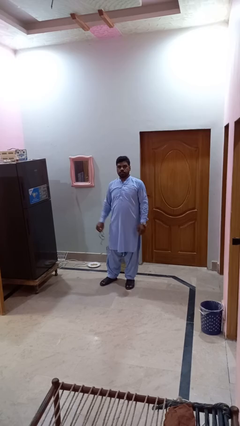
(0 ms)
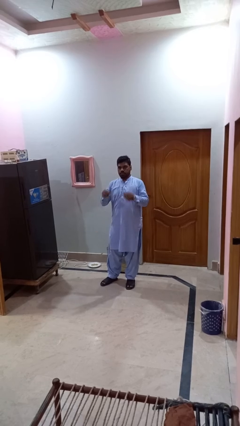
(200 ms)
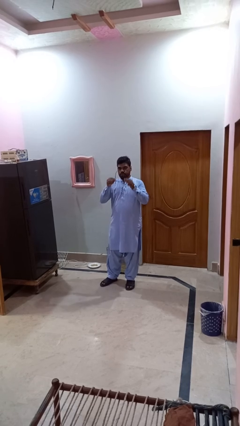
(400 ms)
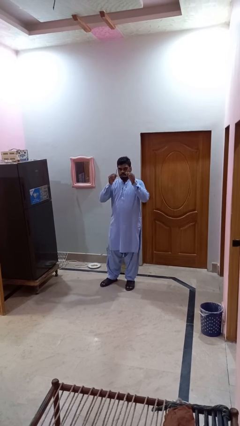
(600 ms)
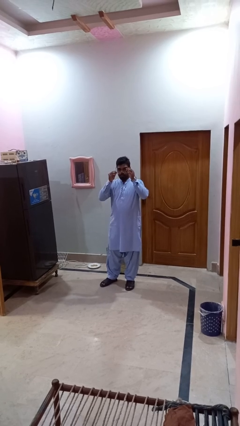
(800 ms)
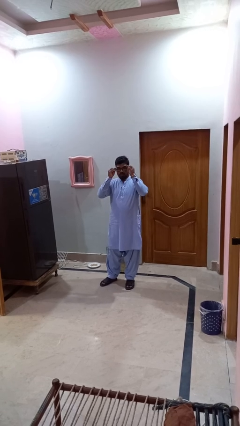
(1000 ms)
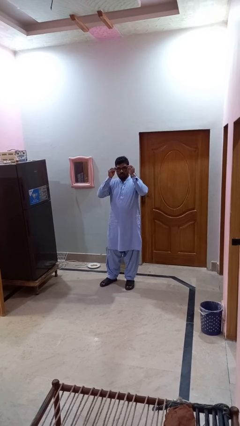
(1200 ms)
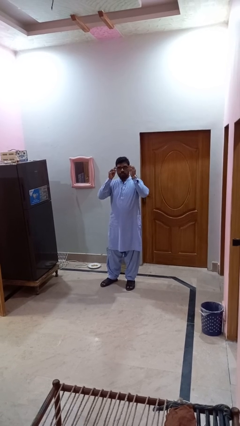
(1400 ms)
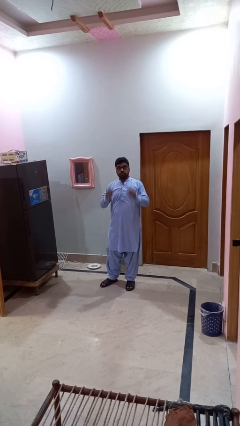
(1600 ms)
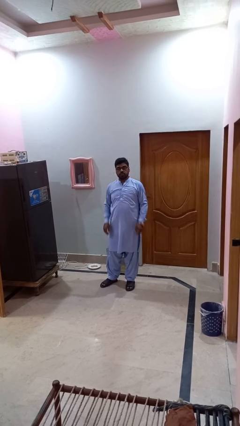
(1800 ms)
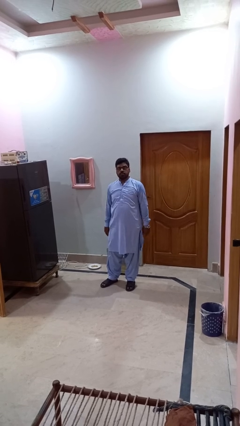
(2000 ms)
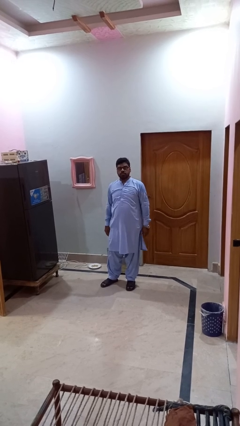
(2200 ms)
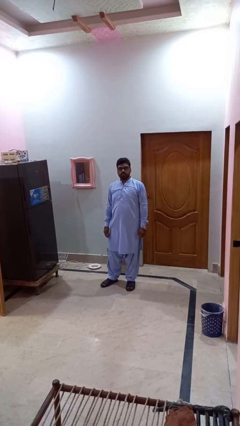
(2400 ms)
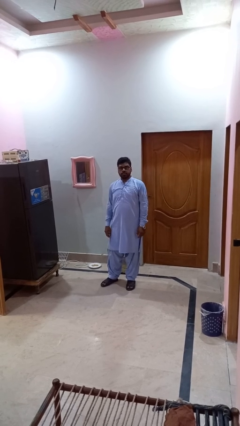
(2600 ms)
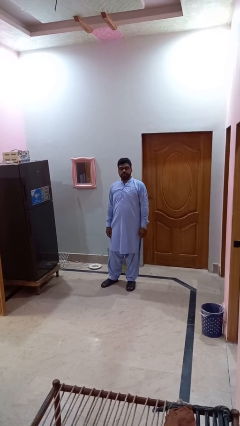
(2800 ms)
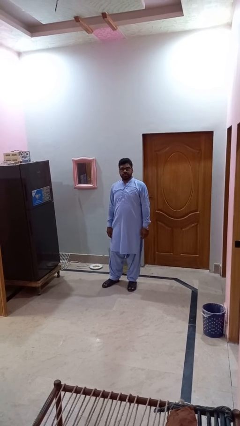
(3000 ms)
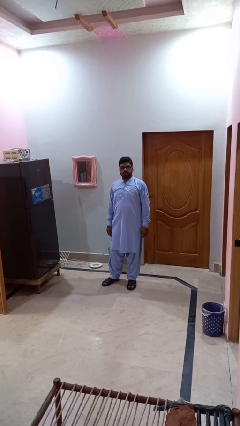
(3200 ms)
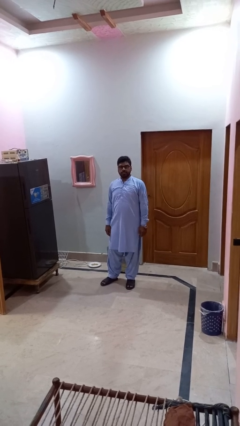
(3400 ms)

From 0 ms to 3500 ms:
person puts on glasses

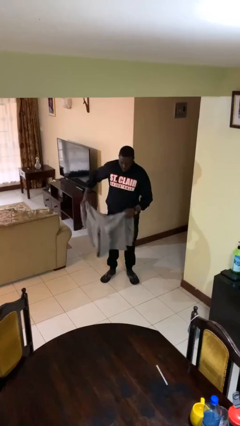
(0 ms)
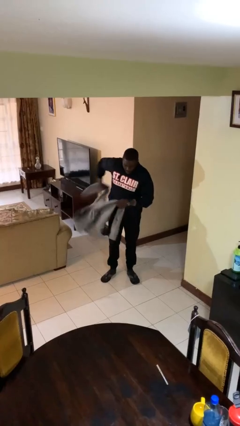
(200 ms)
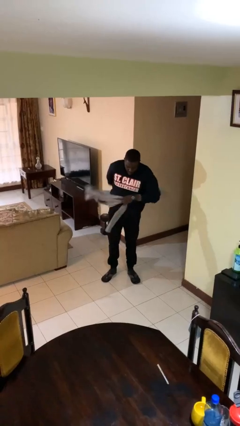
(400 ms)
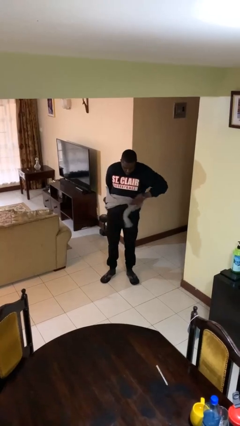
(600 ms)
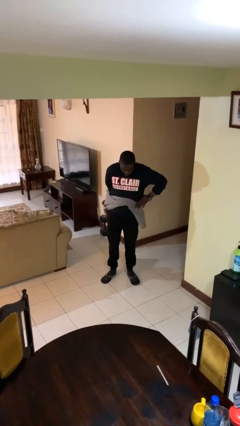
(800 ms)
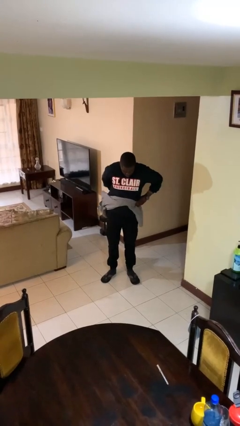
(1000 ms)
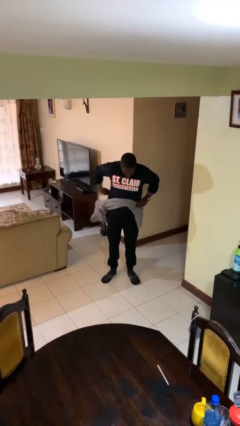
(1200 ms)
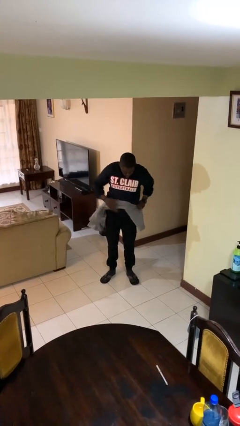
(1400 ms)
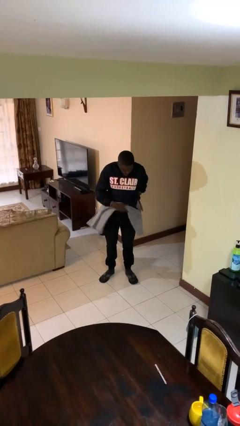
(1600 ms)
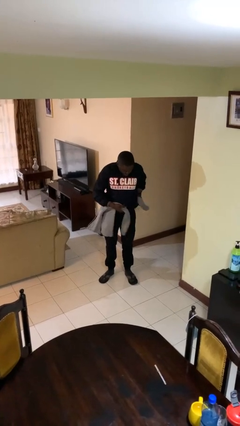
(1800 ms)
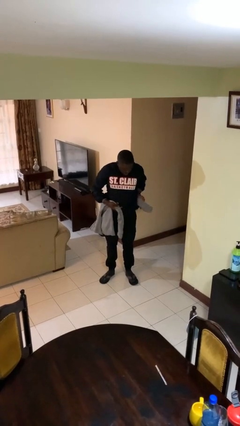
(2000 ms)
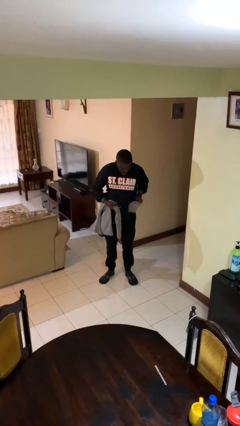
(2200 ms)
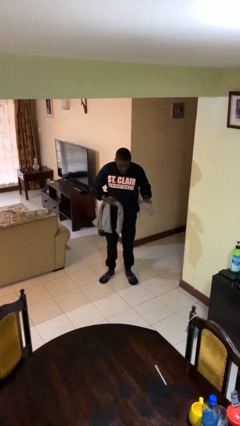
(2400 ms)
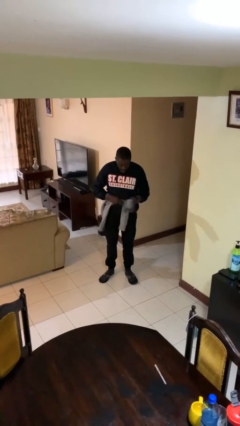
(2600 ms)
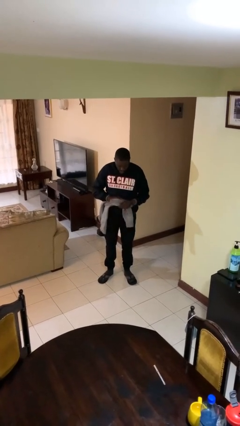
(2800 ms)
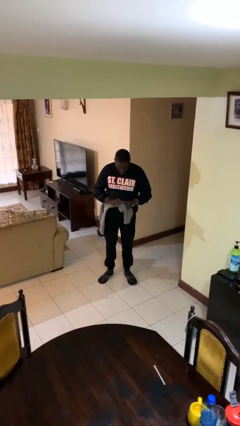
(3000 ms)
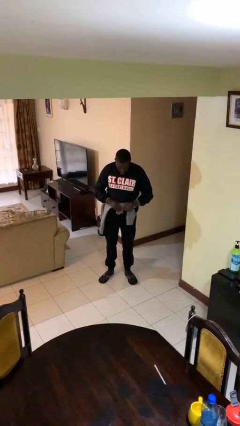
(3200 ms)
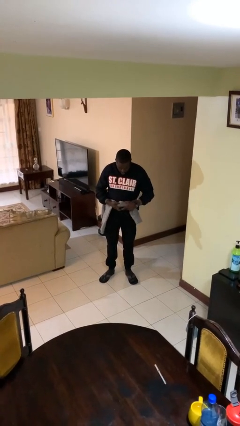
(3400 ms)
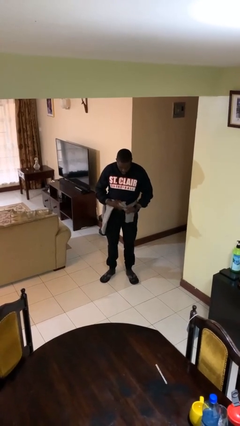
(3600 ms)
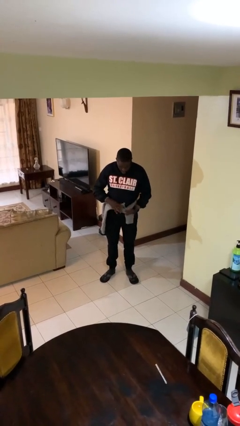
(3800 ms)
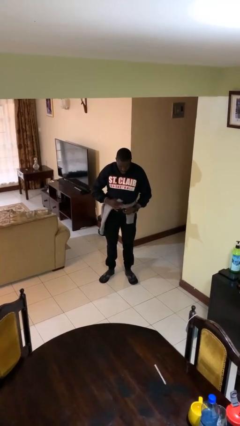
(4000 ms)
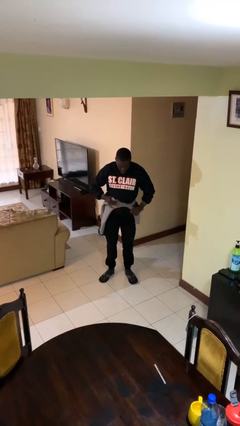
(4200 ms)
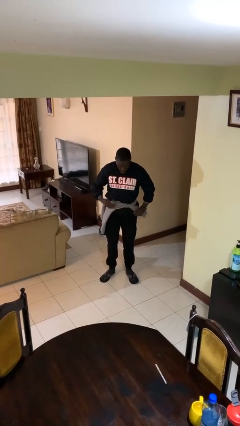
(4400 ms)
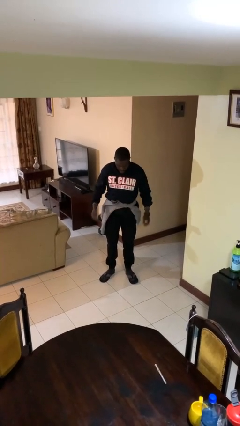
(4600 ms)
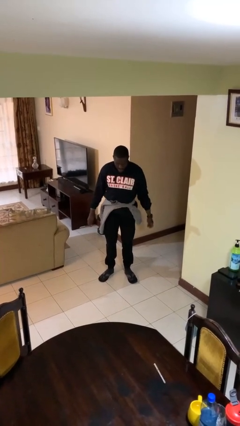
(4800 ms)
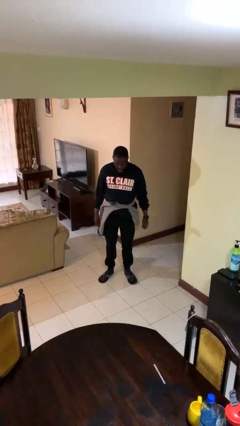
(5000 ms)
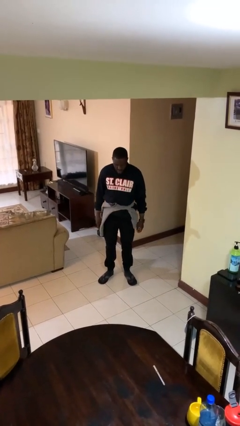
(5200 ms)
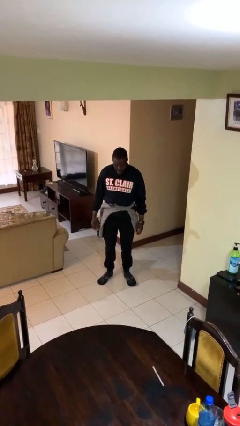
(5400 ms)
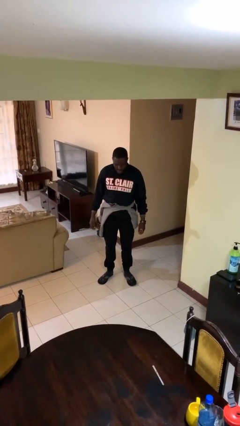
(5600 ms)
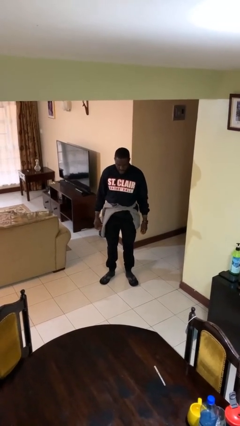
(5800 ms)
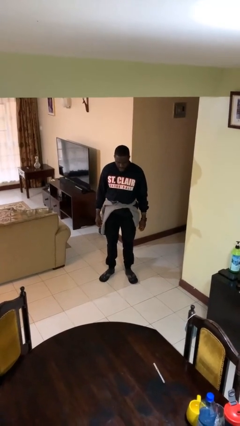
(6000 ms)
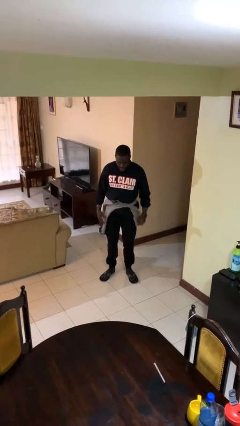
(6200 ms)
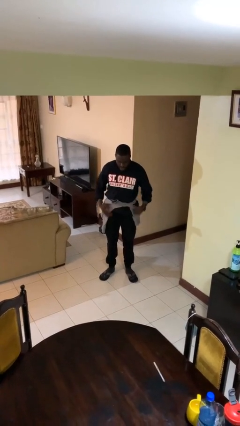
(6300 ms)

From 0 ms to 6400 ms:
person ties jacket around waist

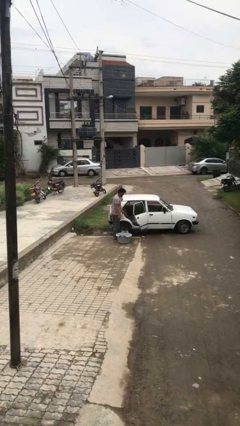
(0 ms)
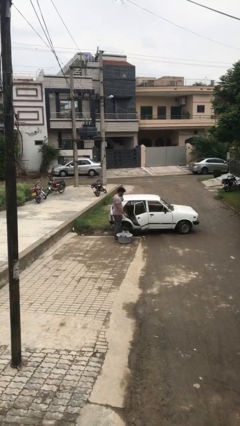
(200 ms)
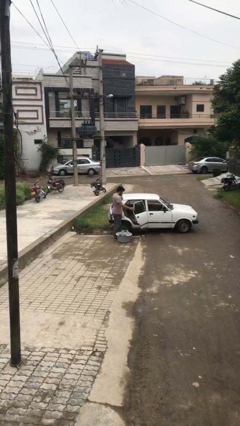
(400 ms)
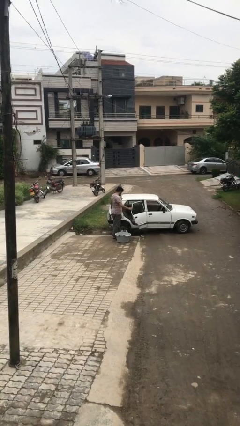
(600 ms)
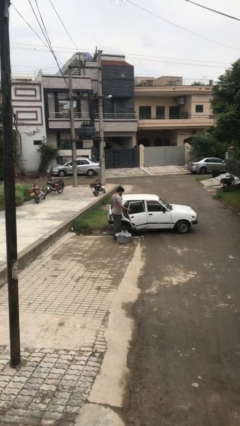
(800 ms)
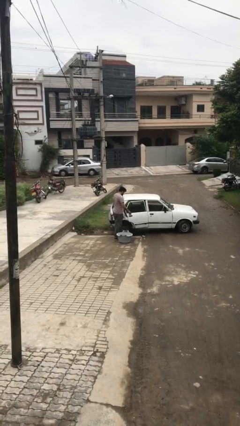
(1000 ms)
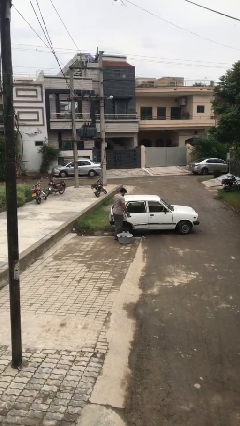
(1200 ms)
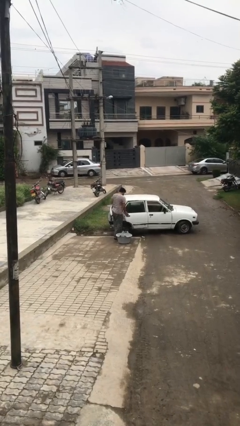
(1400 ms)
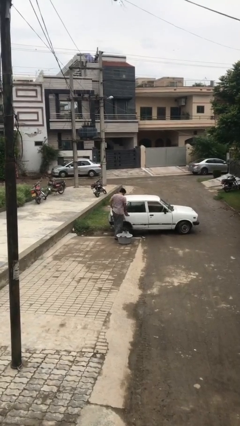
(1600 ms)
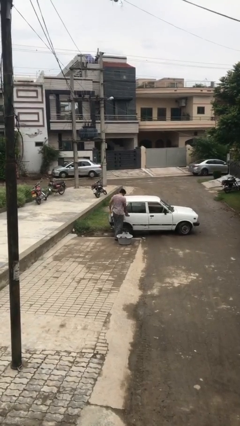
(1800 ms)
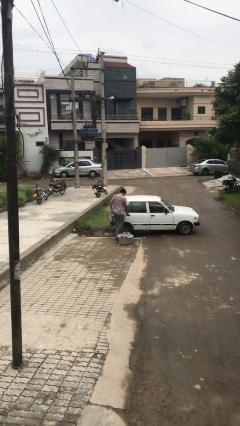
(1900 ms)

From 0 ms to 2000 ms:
person closes car door

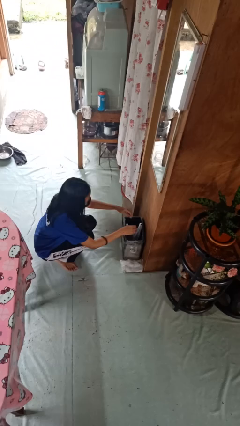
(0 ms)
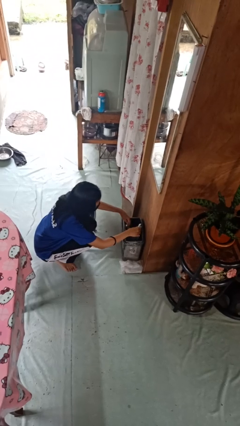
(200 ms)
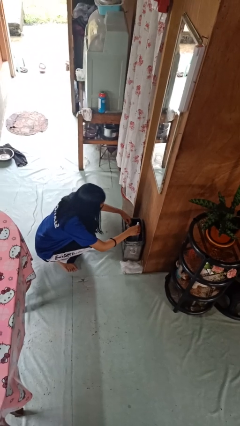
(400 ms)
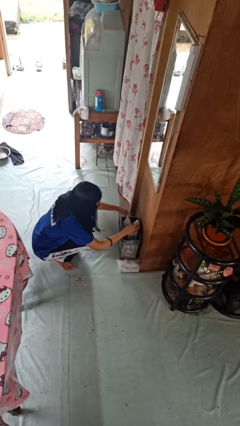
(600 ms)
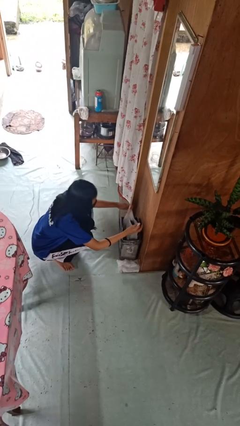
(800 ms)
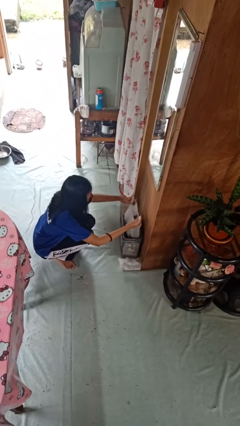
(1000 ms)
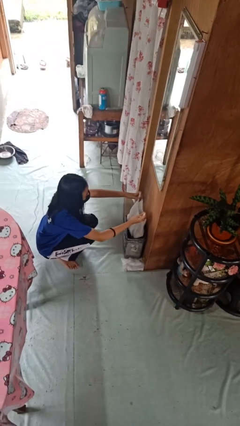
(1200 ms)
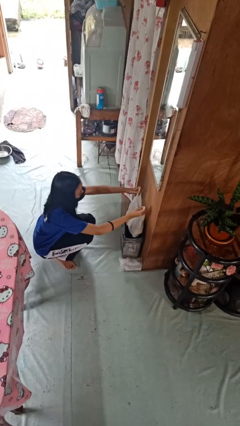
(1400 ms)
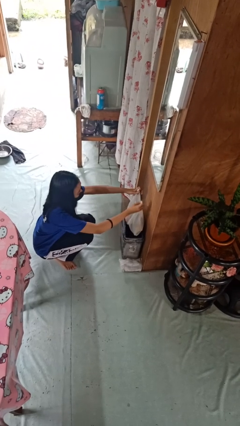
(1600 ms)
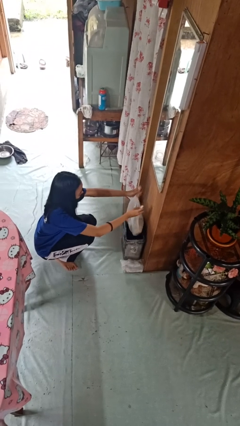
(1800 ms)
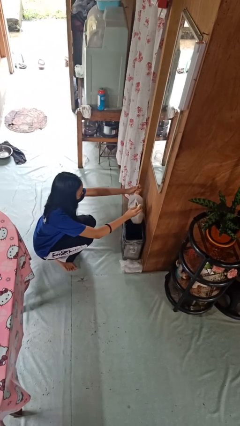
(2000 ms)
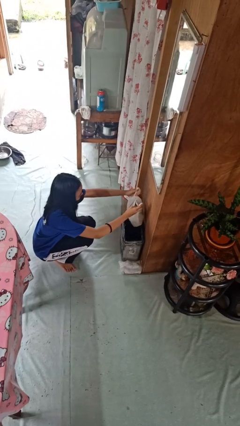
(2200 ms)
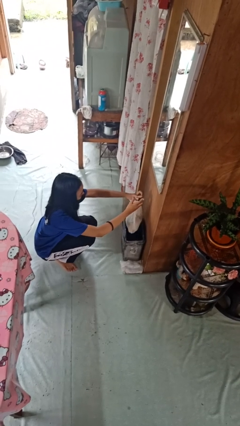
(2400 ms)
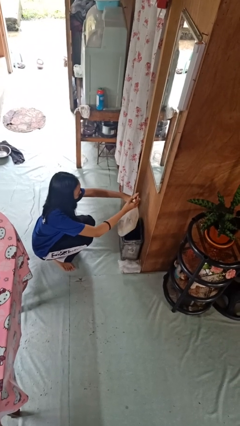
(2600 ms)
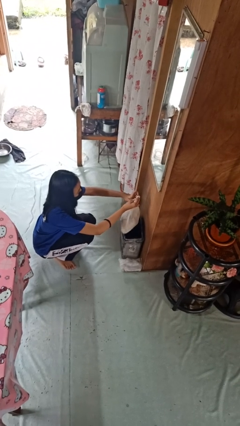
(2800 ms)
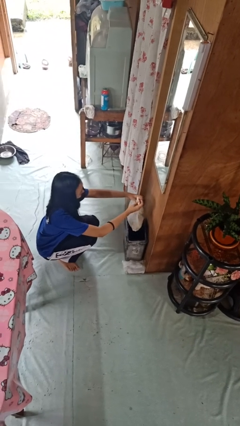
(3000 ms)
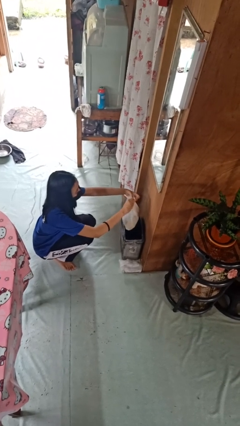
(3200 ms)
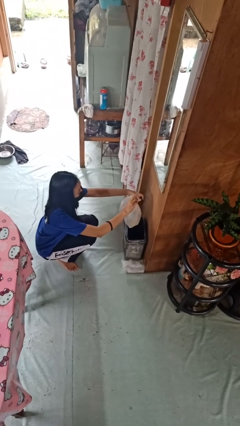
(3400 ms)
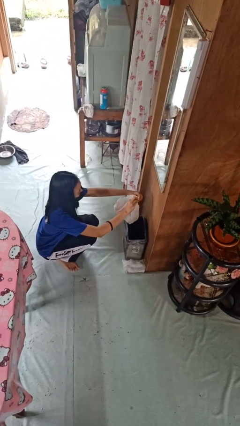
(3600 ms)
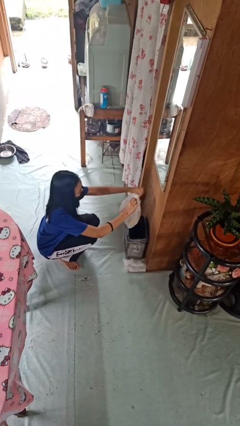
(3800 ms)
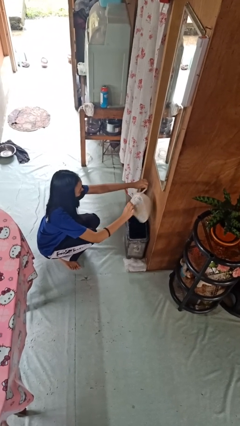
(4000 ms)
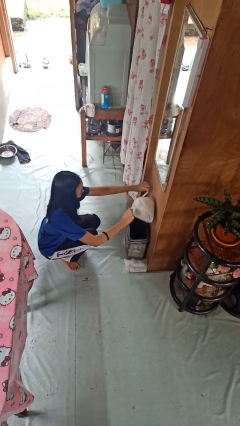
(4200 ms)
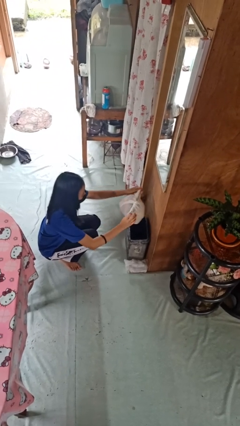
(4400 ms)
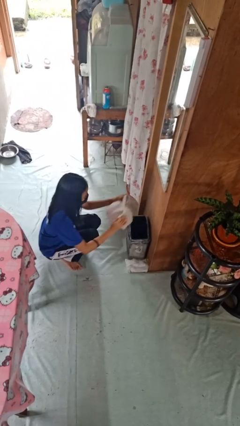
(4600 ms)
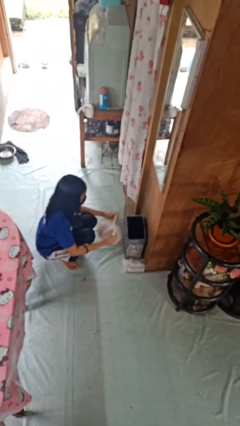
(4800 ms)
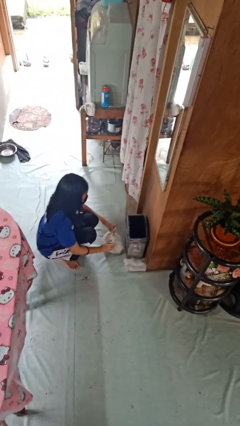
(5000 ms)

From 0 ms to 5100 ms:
person removes trashbag from trashcan

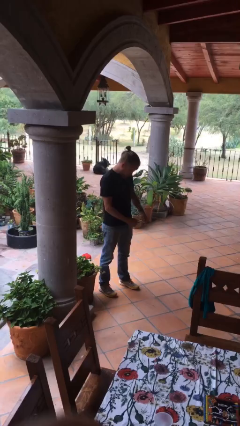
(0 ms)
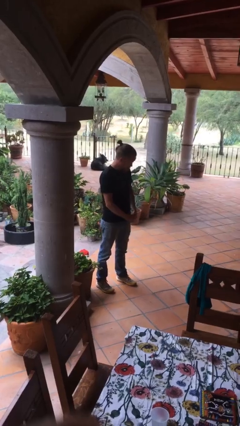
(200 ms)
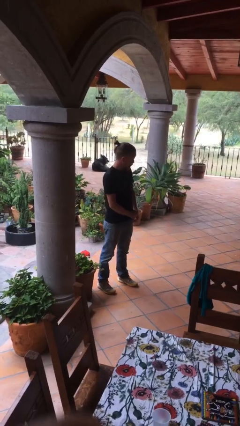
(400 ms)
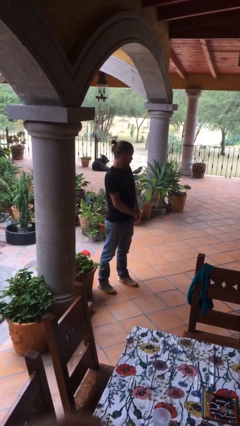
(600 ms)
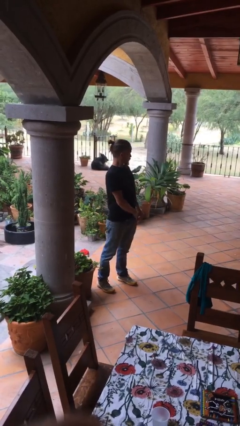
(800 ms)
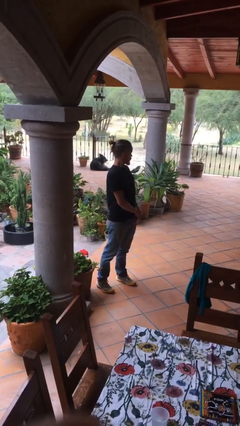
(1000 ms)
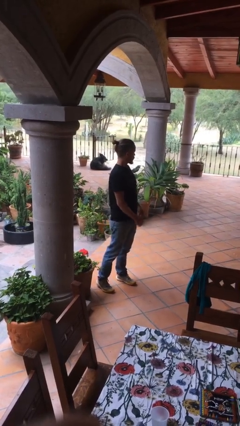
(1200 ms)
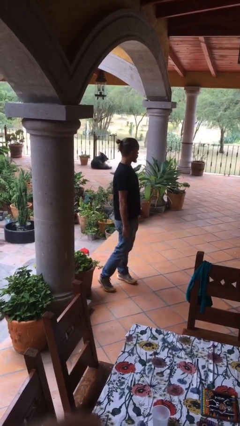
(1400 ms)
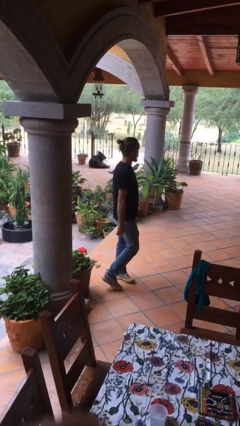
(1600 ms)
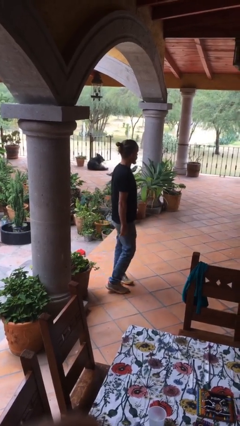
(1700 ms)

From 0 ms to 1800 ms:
person puts phone into pocket
